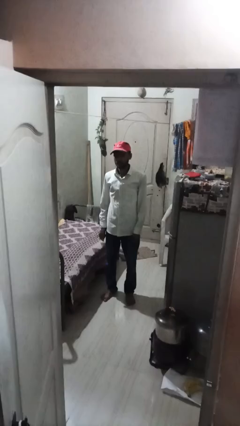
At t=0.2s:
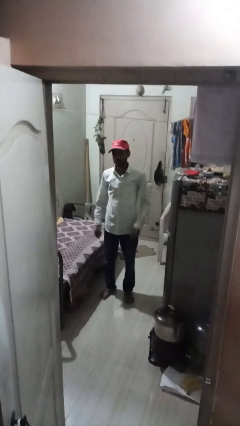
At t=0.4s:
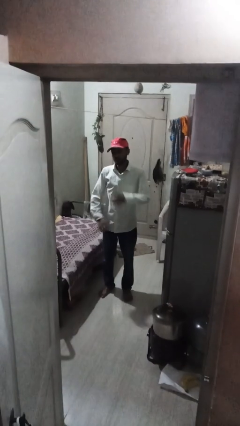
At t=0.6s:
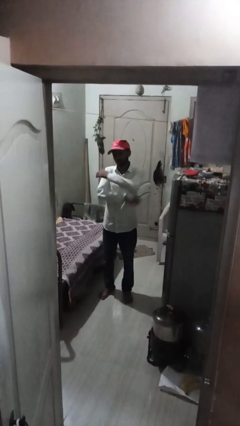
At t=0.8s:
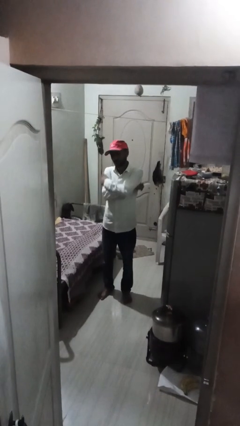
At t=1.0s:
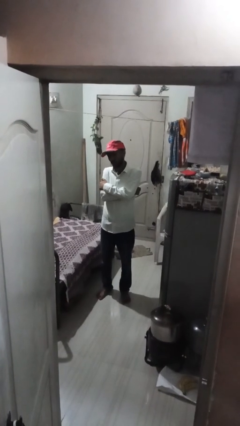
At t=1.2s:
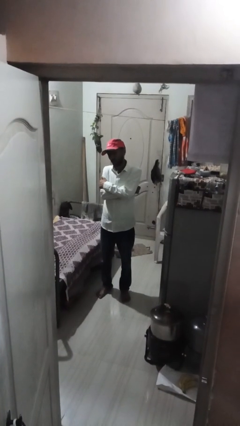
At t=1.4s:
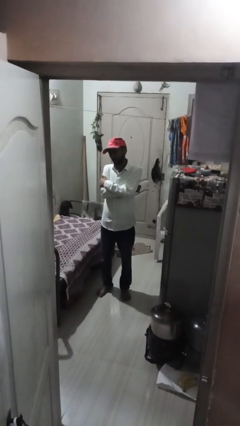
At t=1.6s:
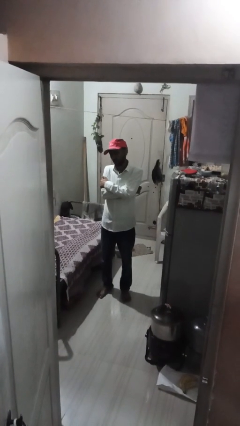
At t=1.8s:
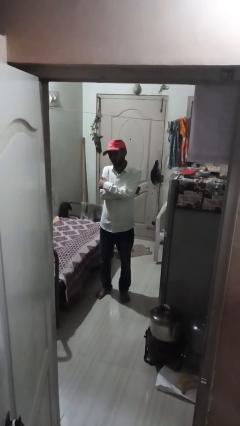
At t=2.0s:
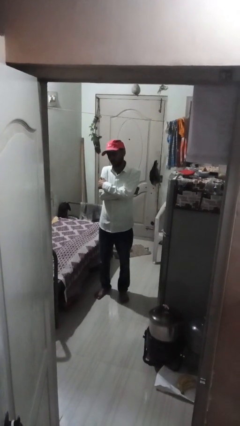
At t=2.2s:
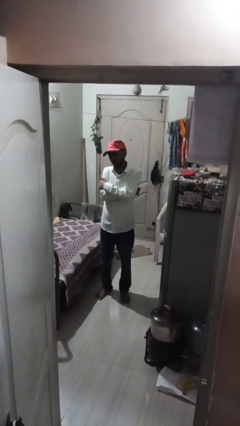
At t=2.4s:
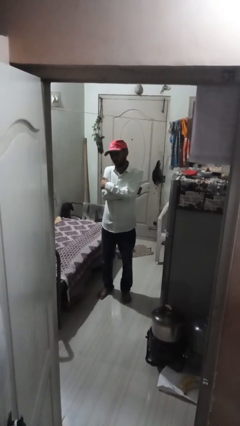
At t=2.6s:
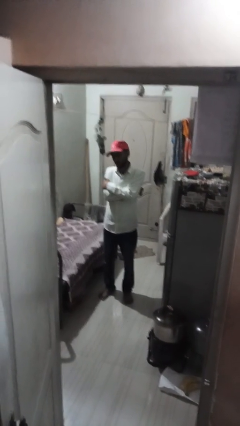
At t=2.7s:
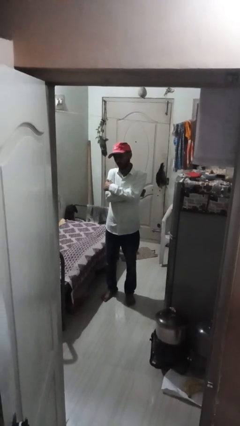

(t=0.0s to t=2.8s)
person crosses arms

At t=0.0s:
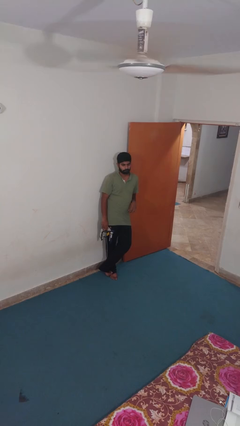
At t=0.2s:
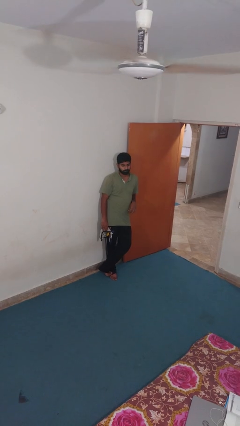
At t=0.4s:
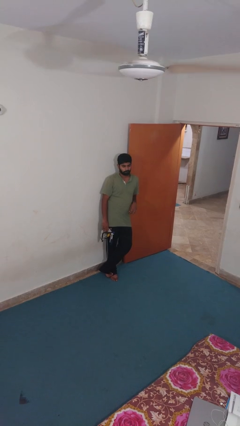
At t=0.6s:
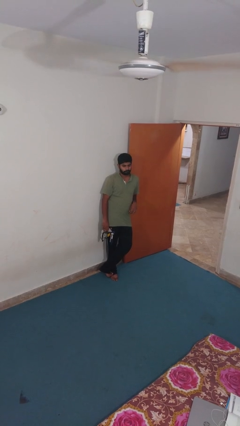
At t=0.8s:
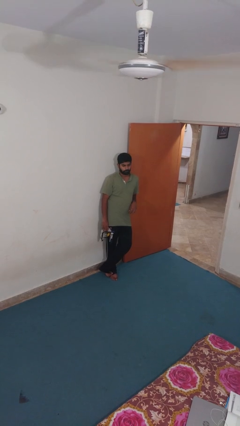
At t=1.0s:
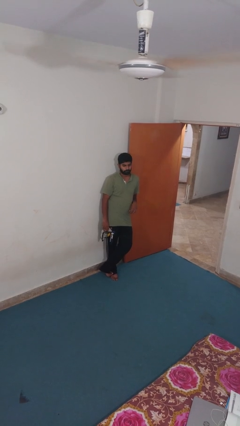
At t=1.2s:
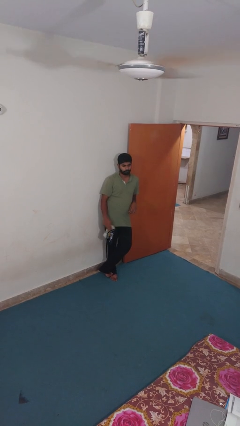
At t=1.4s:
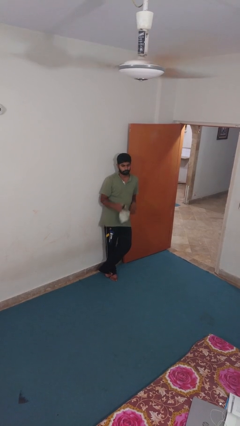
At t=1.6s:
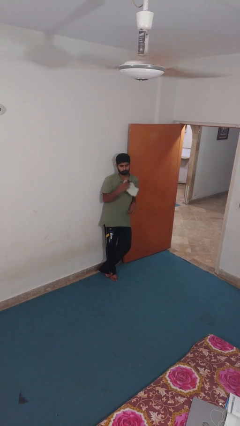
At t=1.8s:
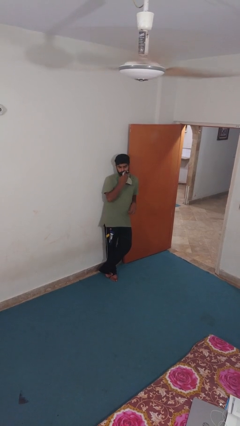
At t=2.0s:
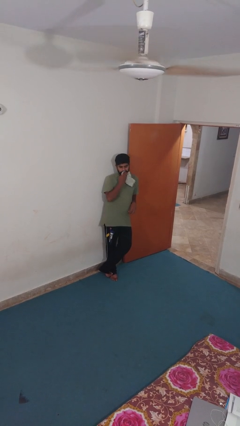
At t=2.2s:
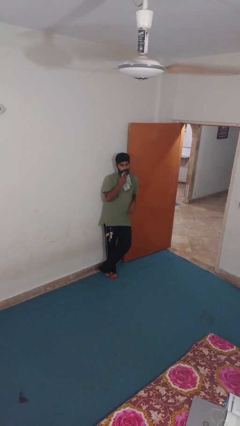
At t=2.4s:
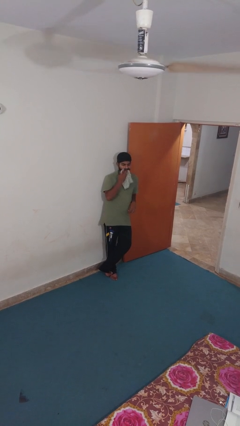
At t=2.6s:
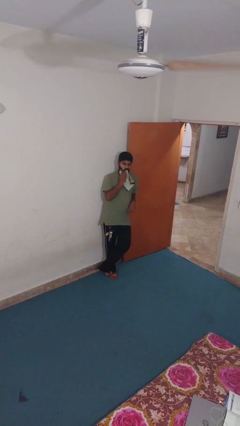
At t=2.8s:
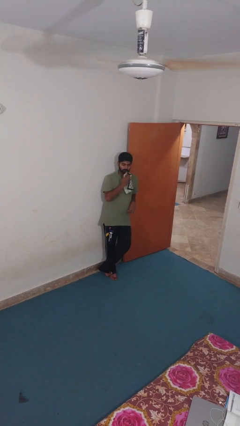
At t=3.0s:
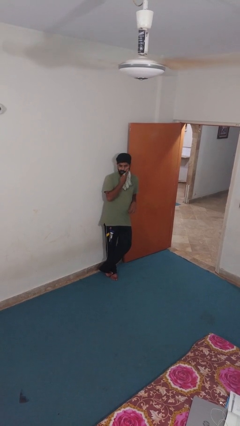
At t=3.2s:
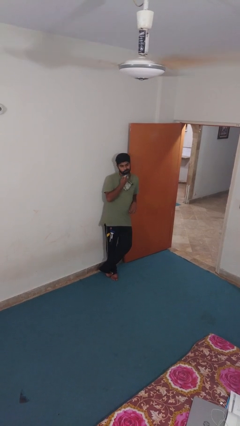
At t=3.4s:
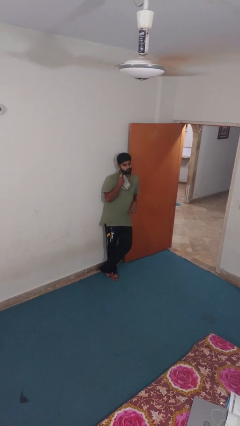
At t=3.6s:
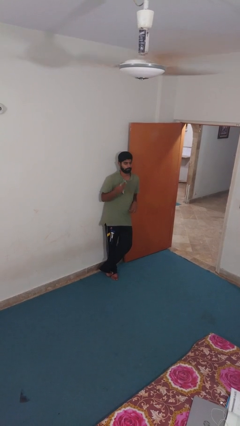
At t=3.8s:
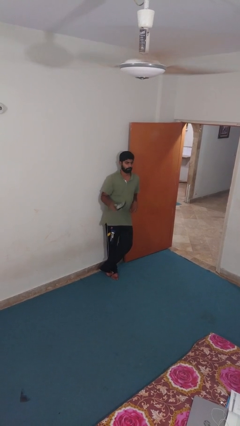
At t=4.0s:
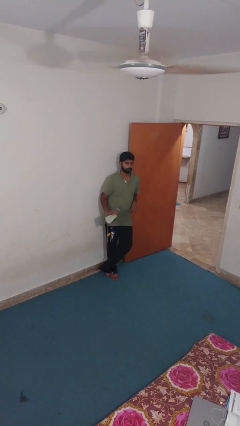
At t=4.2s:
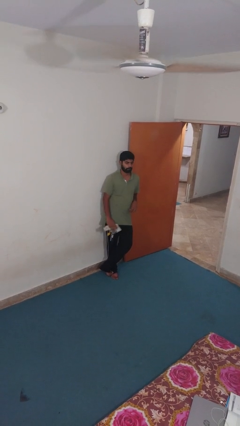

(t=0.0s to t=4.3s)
person wipes mouth with napkin

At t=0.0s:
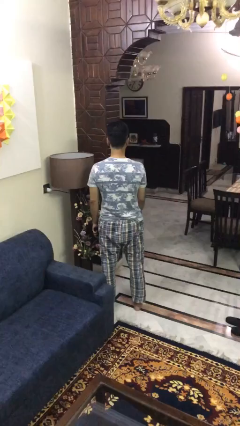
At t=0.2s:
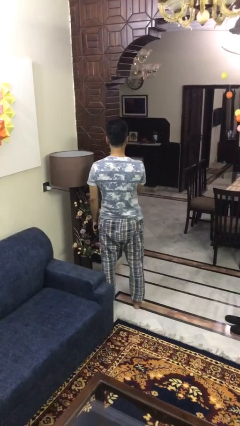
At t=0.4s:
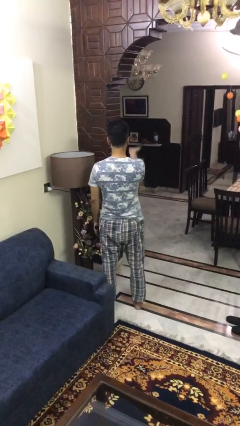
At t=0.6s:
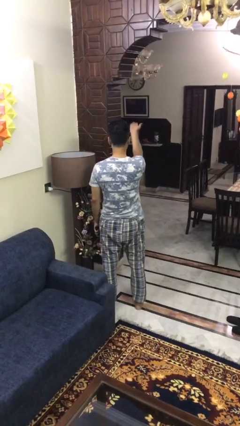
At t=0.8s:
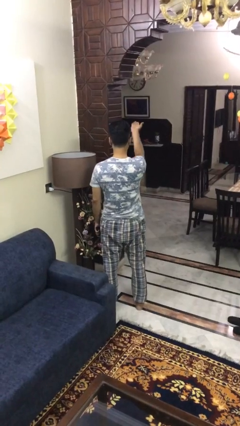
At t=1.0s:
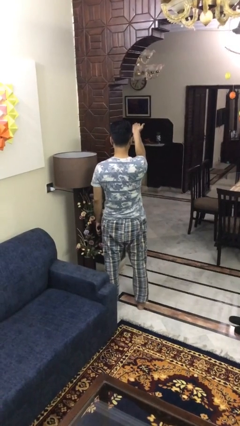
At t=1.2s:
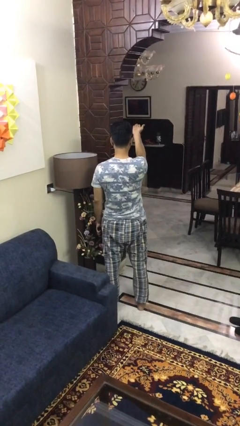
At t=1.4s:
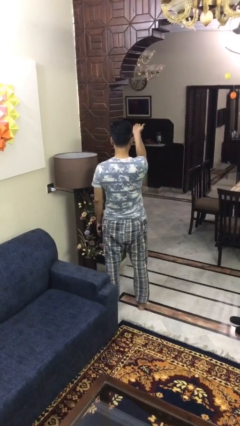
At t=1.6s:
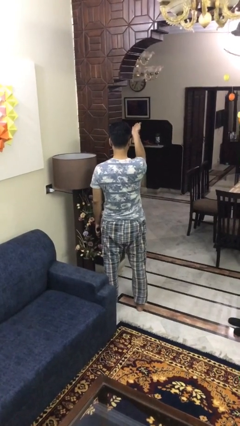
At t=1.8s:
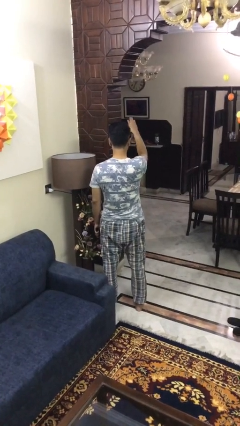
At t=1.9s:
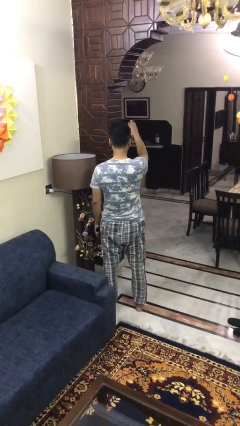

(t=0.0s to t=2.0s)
person gestures swipe up

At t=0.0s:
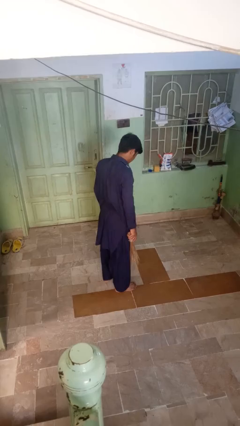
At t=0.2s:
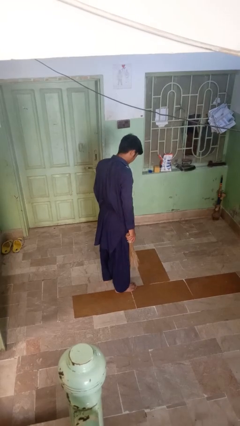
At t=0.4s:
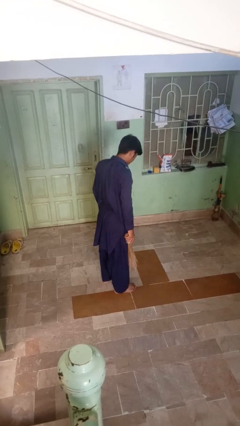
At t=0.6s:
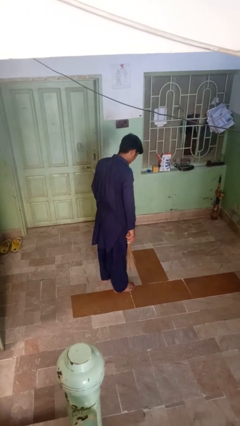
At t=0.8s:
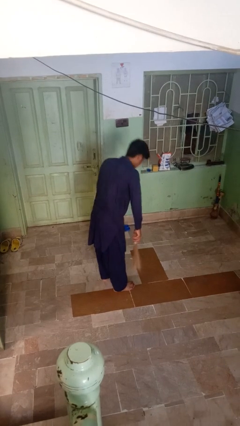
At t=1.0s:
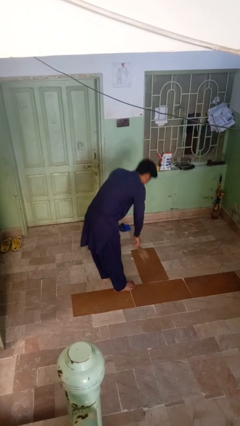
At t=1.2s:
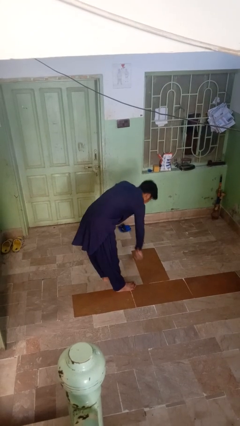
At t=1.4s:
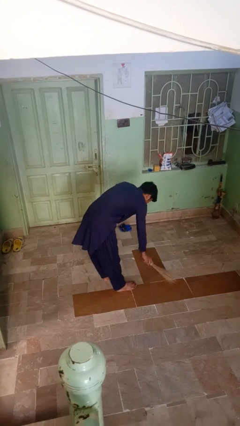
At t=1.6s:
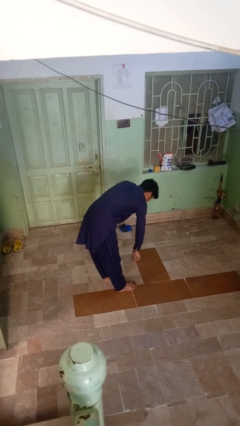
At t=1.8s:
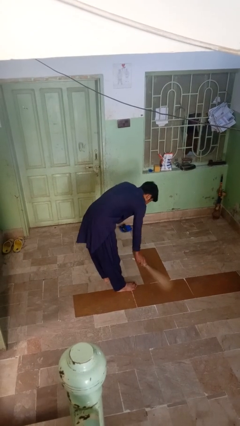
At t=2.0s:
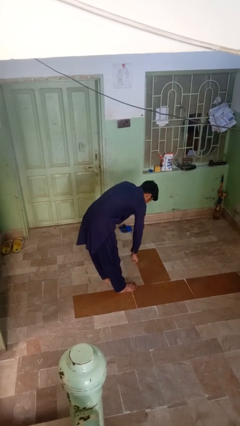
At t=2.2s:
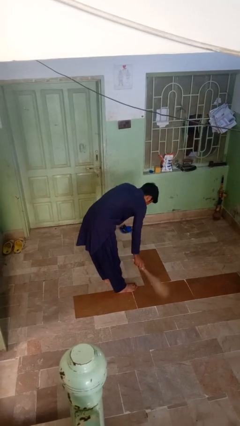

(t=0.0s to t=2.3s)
person sweeps floor

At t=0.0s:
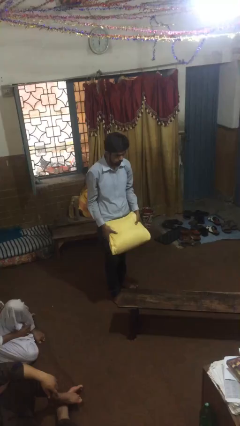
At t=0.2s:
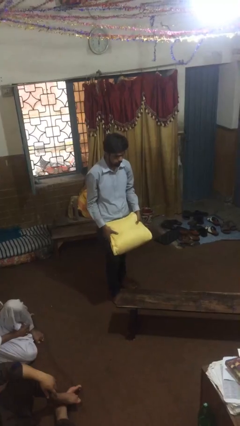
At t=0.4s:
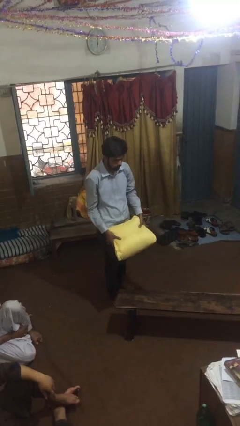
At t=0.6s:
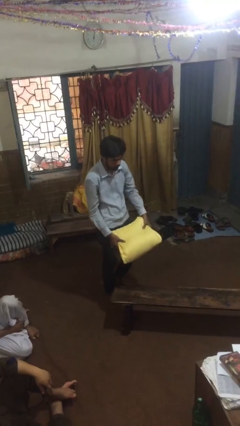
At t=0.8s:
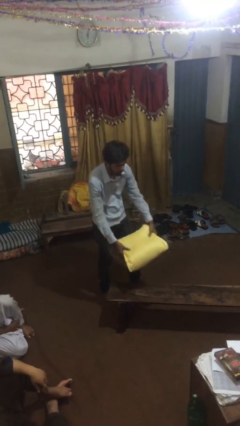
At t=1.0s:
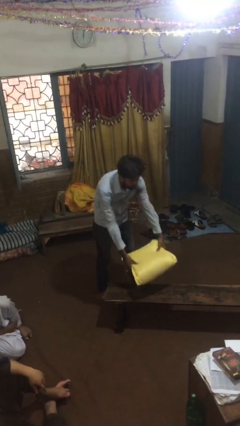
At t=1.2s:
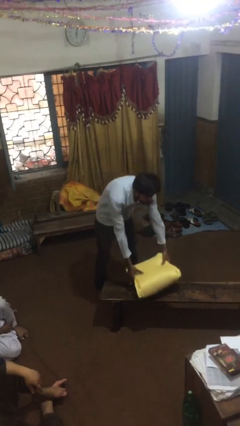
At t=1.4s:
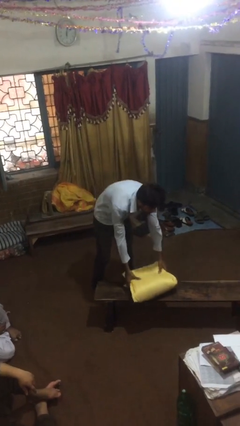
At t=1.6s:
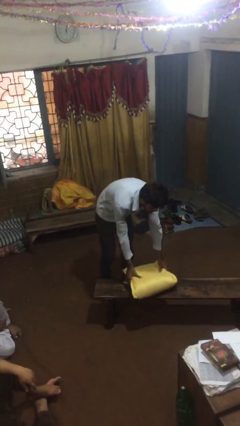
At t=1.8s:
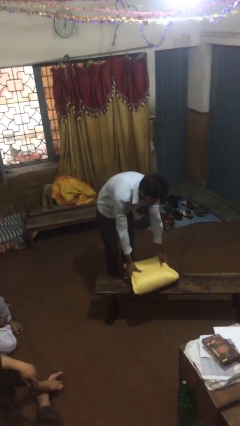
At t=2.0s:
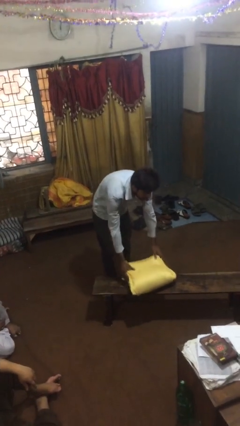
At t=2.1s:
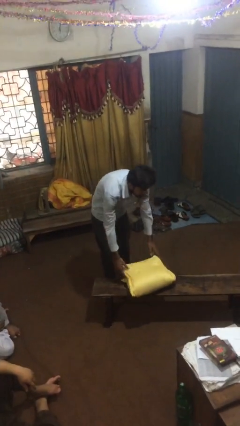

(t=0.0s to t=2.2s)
person puts down object on table

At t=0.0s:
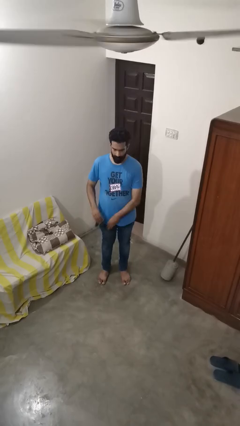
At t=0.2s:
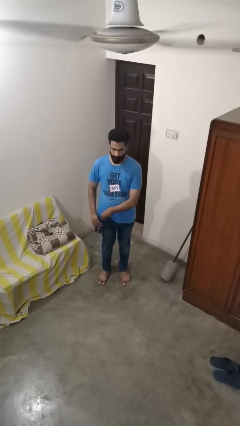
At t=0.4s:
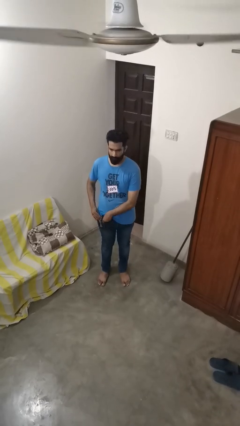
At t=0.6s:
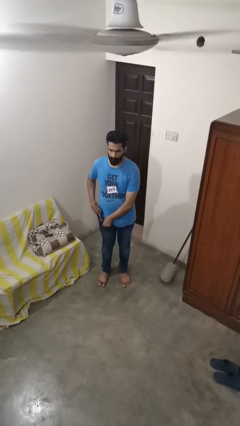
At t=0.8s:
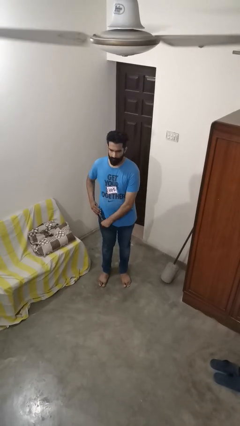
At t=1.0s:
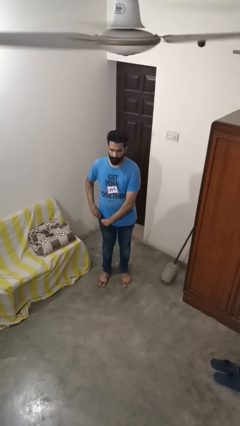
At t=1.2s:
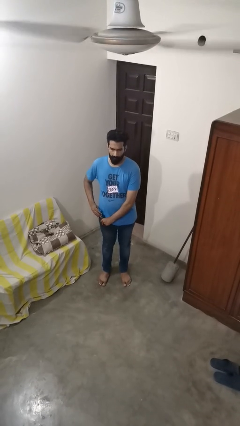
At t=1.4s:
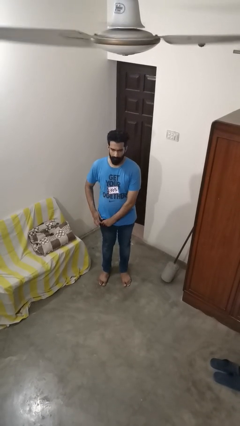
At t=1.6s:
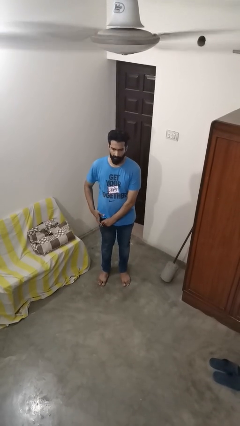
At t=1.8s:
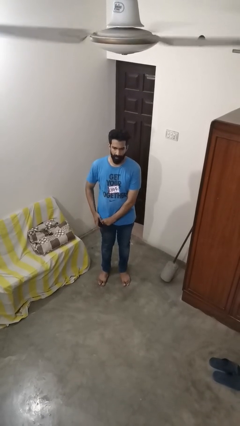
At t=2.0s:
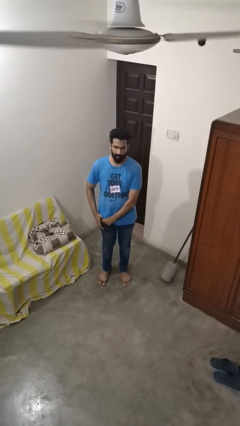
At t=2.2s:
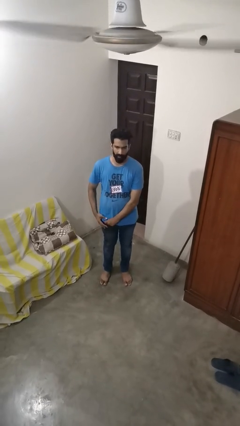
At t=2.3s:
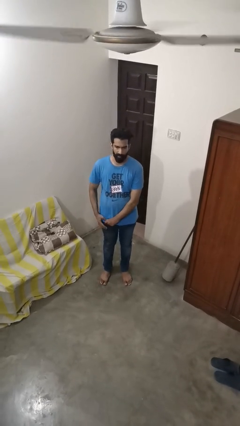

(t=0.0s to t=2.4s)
person puts phone into pocket

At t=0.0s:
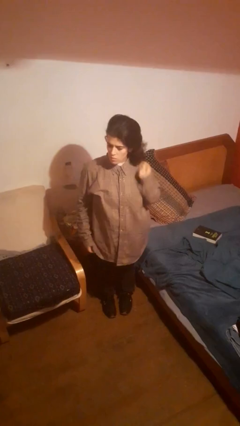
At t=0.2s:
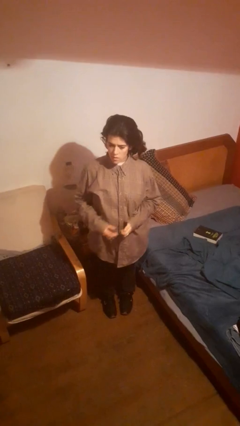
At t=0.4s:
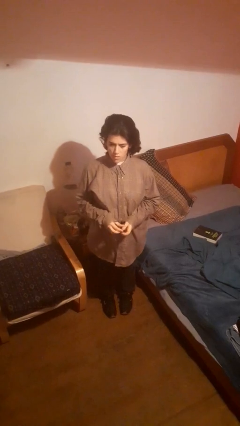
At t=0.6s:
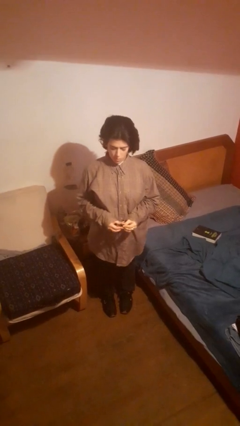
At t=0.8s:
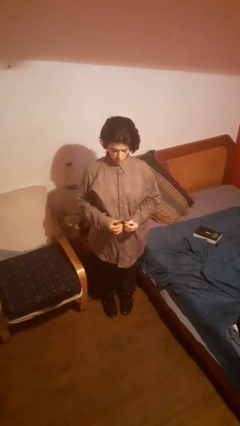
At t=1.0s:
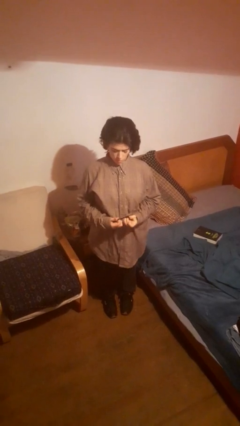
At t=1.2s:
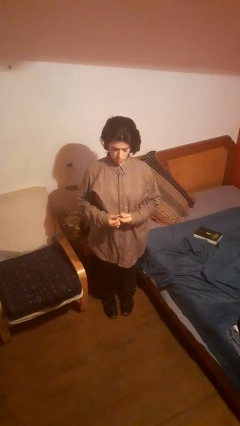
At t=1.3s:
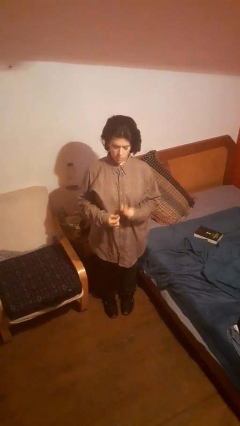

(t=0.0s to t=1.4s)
person takes off hairtie

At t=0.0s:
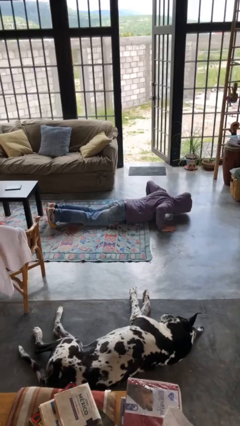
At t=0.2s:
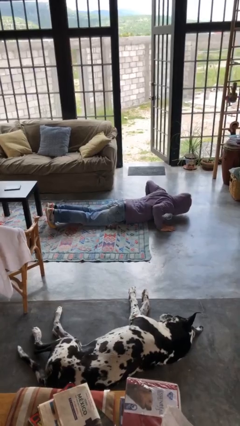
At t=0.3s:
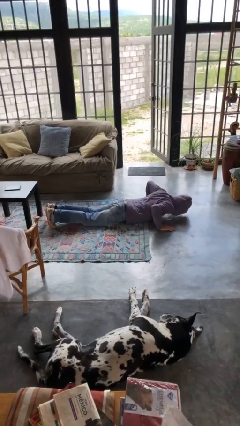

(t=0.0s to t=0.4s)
person exercises with pushup
